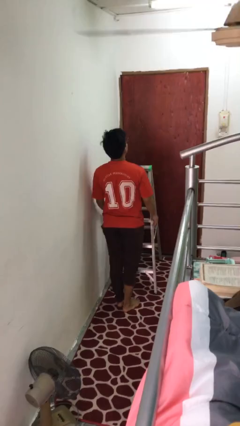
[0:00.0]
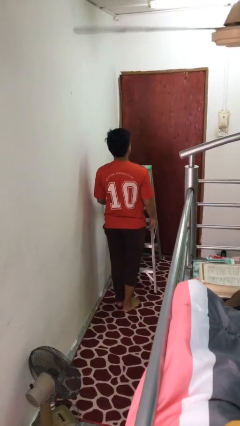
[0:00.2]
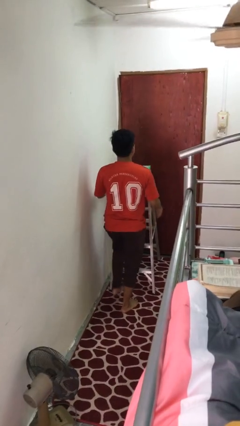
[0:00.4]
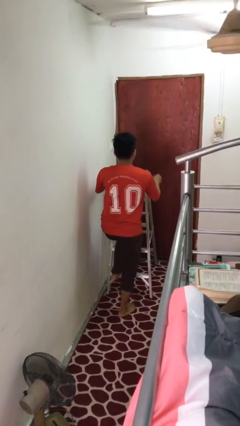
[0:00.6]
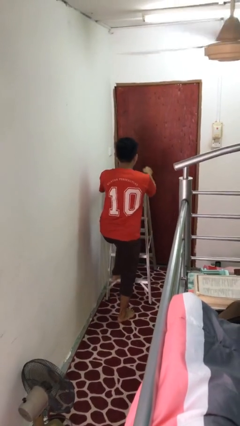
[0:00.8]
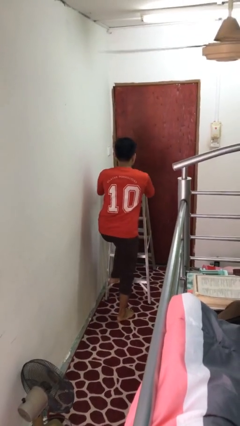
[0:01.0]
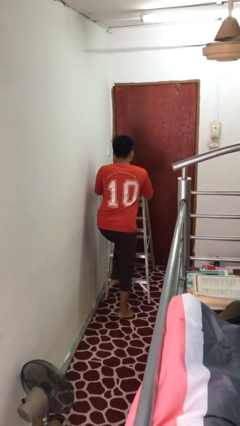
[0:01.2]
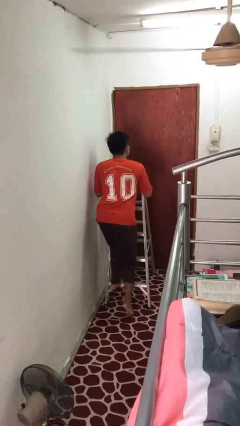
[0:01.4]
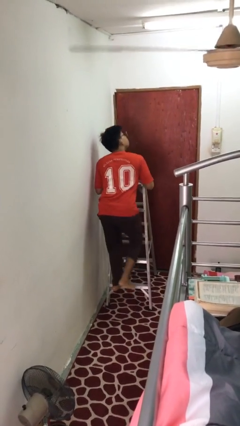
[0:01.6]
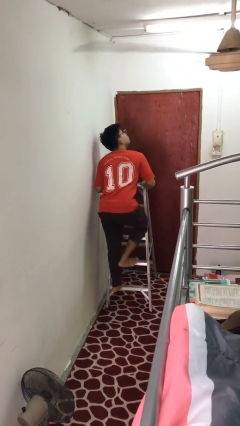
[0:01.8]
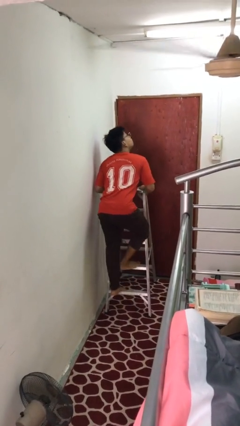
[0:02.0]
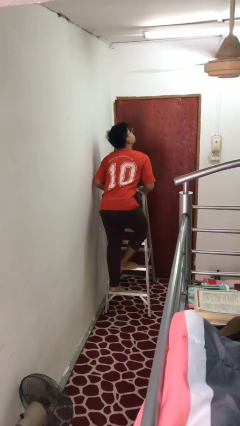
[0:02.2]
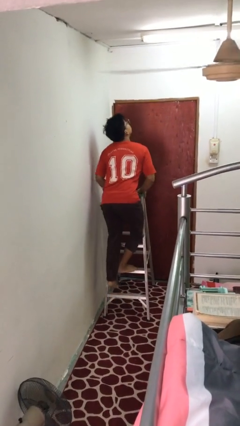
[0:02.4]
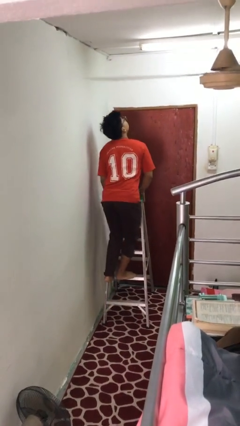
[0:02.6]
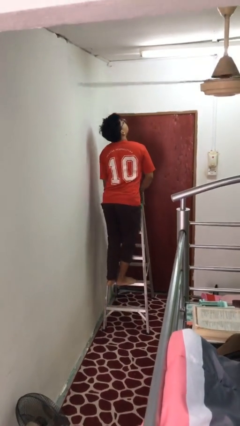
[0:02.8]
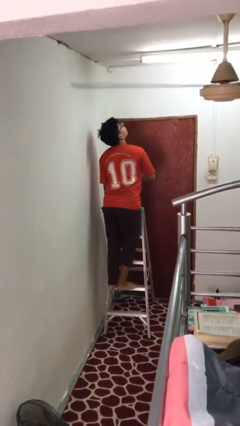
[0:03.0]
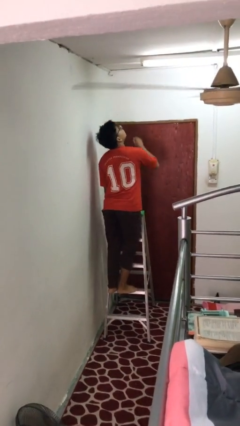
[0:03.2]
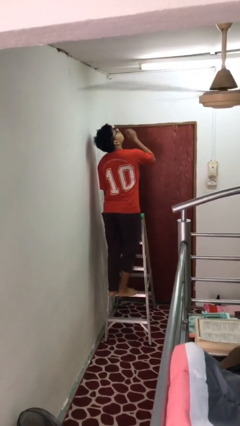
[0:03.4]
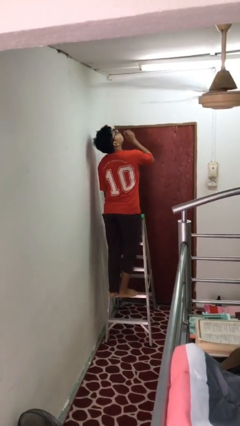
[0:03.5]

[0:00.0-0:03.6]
person climbs up ladder

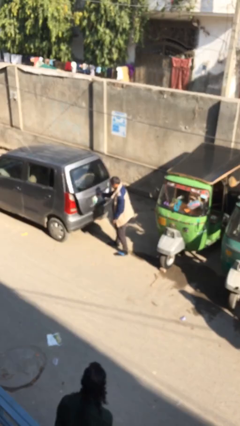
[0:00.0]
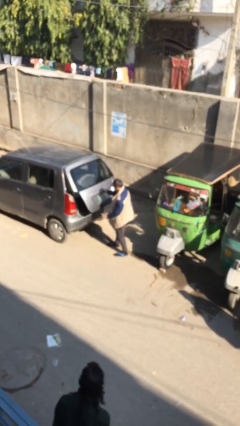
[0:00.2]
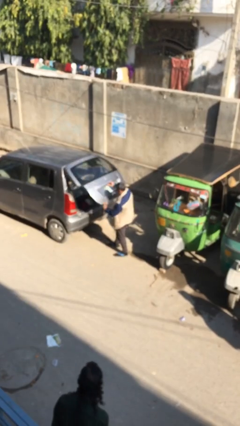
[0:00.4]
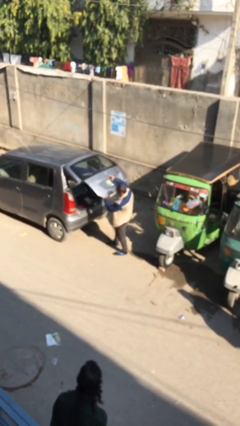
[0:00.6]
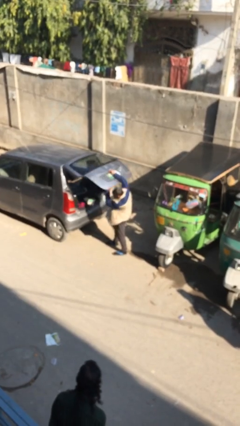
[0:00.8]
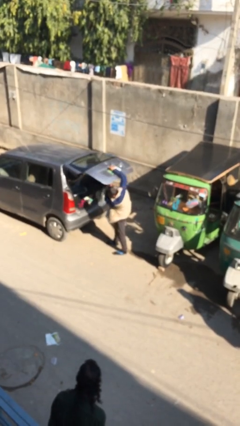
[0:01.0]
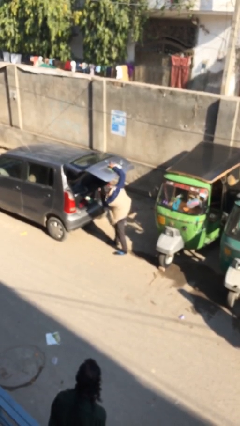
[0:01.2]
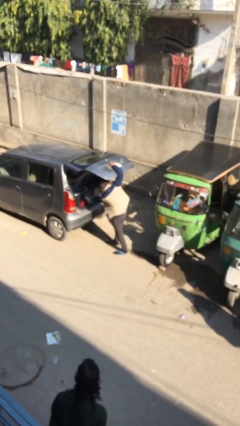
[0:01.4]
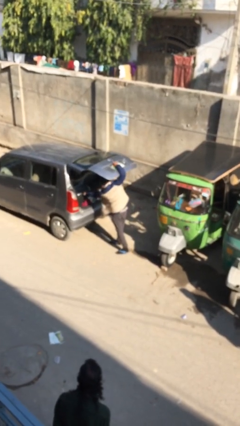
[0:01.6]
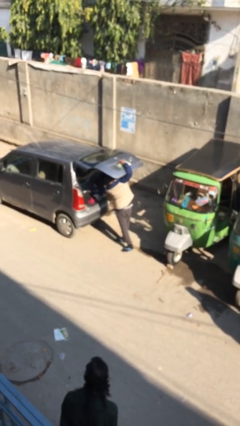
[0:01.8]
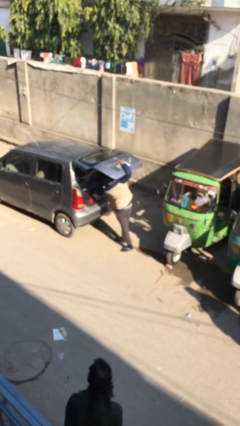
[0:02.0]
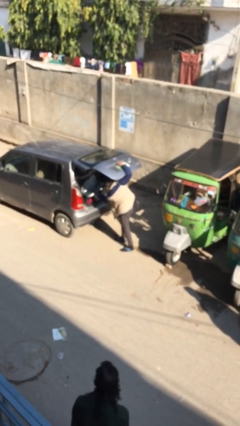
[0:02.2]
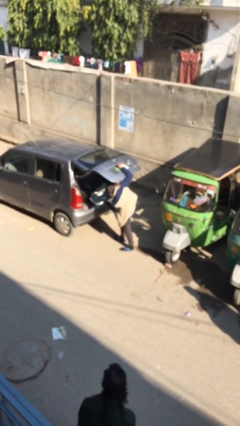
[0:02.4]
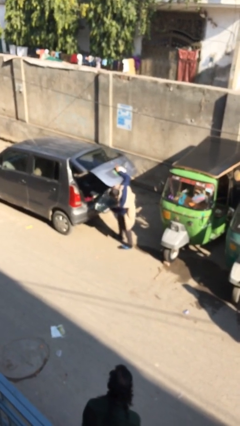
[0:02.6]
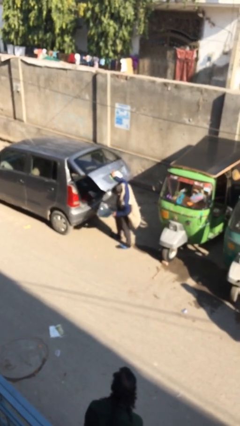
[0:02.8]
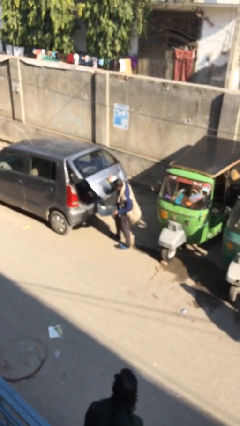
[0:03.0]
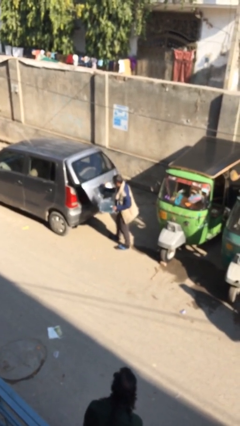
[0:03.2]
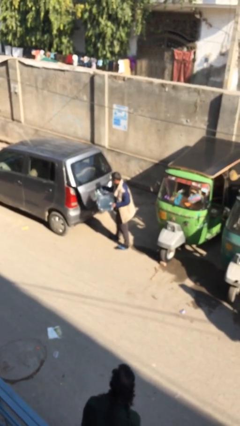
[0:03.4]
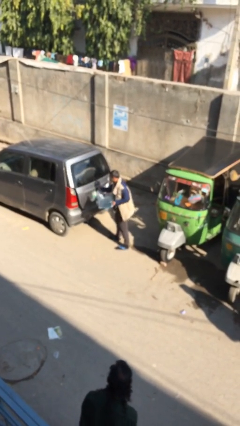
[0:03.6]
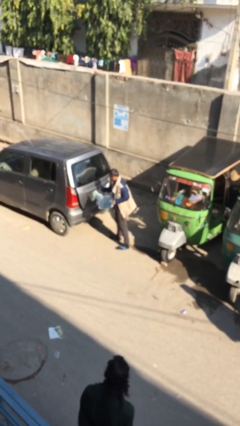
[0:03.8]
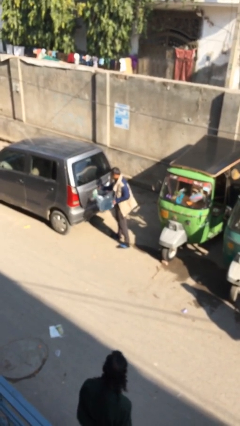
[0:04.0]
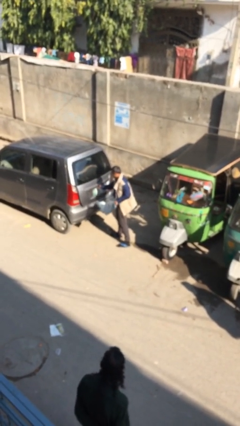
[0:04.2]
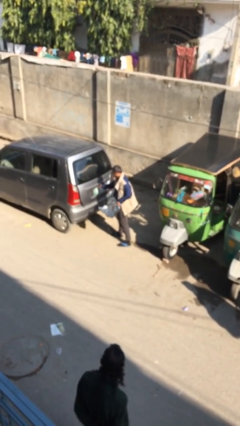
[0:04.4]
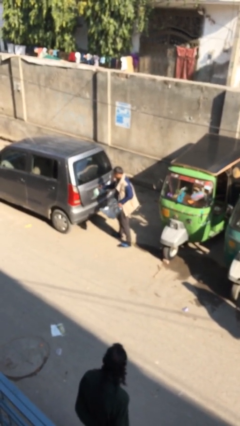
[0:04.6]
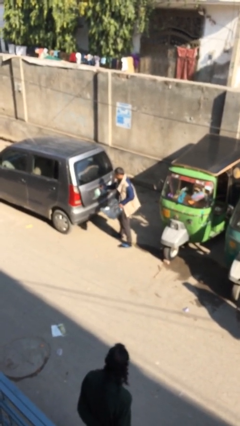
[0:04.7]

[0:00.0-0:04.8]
person unloads car

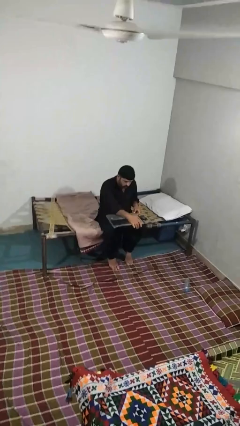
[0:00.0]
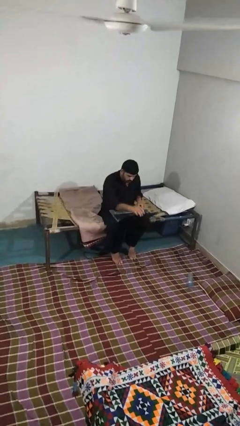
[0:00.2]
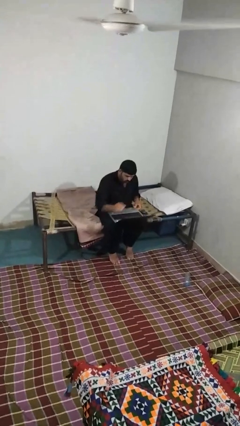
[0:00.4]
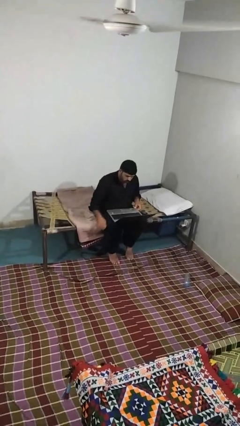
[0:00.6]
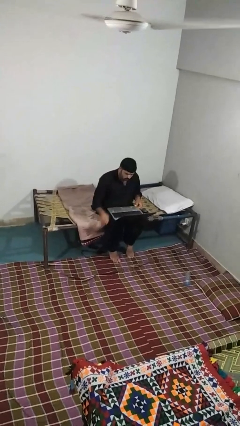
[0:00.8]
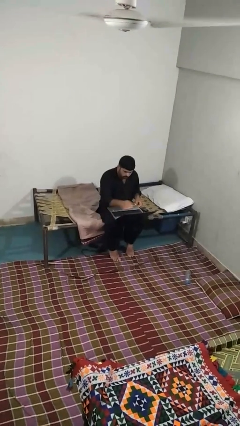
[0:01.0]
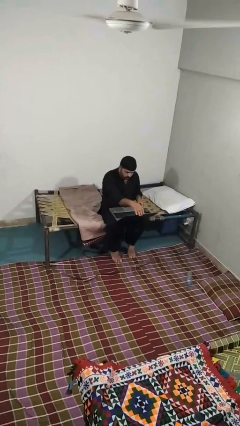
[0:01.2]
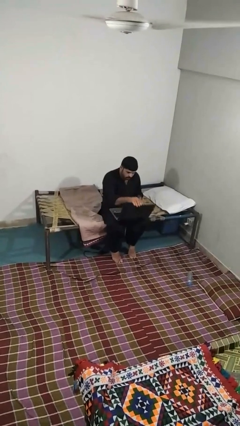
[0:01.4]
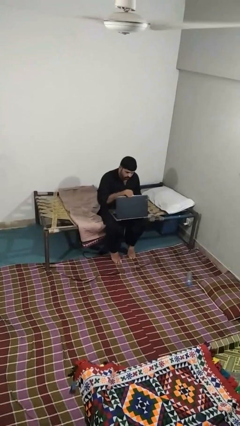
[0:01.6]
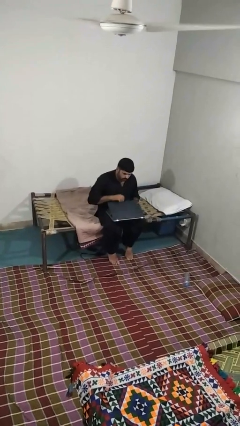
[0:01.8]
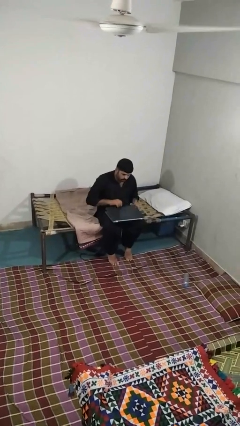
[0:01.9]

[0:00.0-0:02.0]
person closes laptop

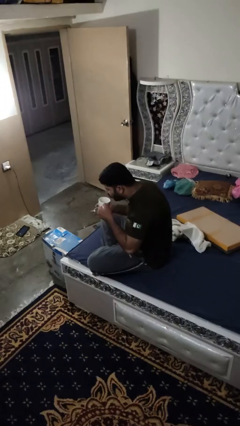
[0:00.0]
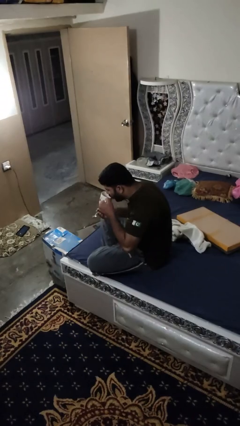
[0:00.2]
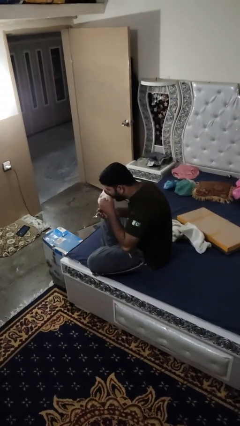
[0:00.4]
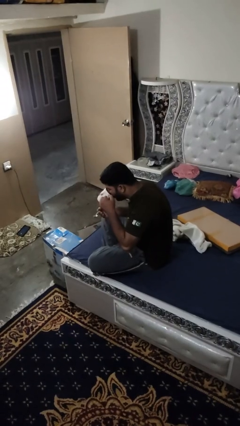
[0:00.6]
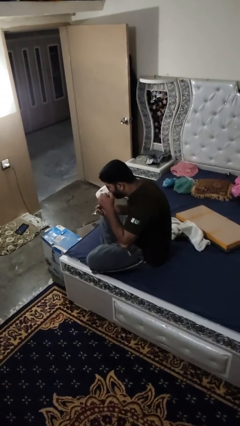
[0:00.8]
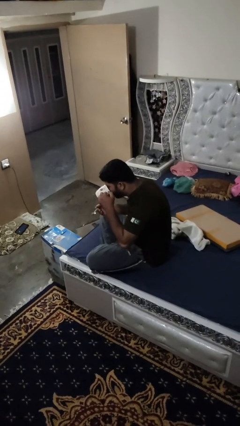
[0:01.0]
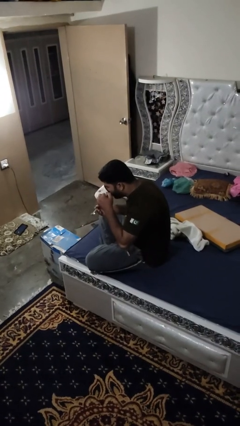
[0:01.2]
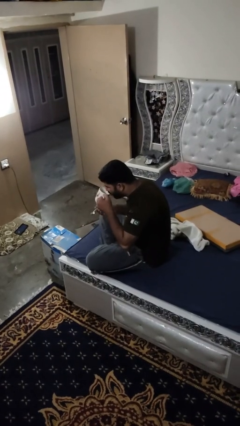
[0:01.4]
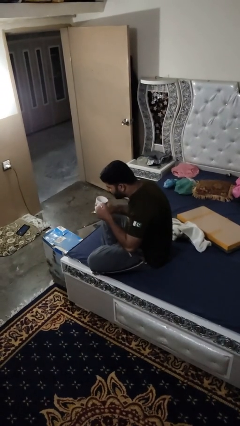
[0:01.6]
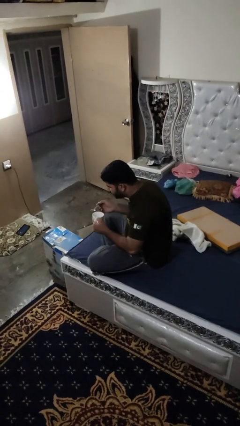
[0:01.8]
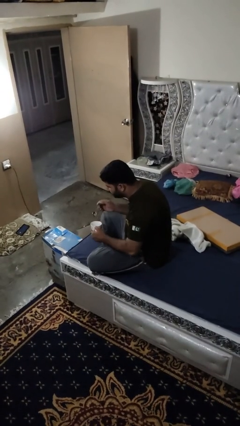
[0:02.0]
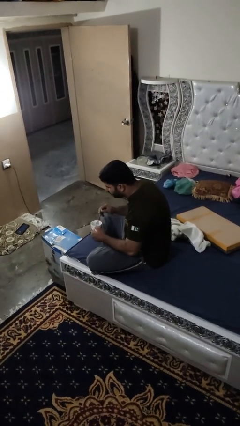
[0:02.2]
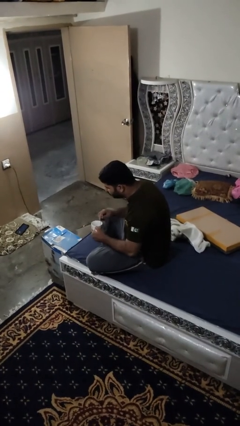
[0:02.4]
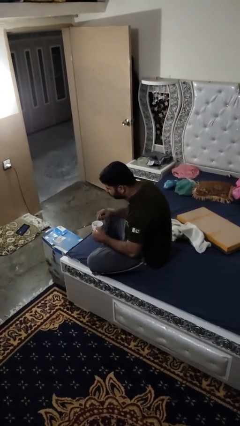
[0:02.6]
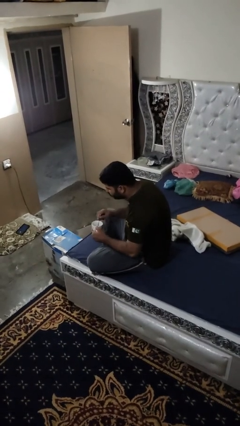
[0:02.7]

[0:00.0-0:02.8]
person drinks from mug

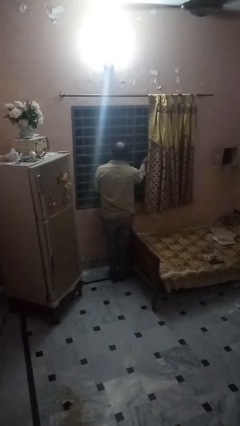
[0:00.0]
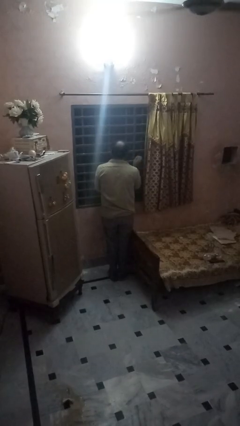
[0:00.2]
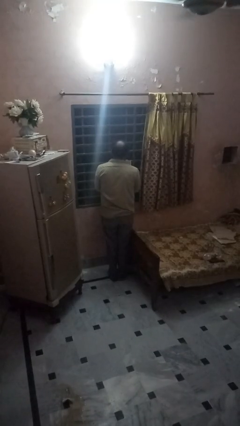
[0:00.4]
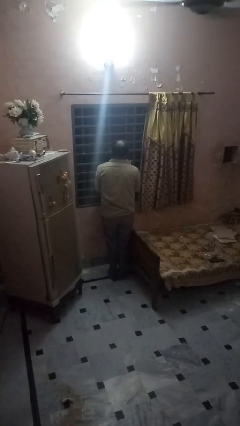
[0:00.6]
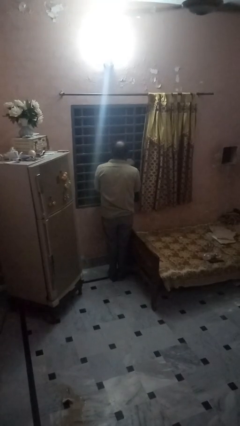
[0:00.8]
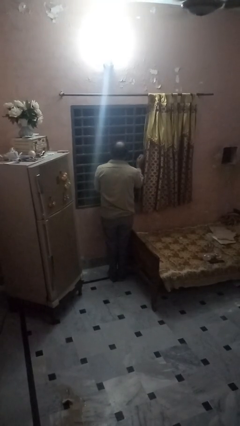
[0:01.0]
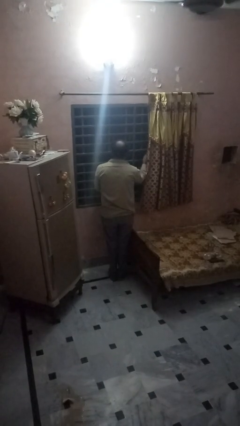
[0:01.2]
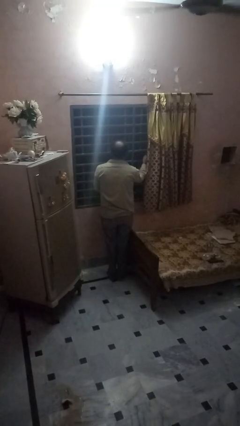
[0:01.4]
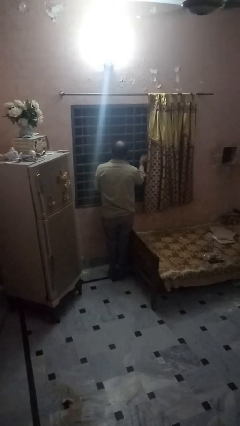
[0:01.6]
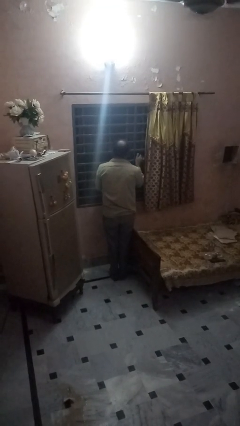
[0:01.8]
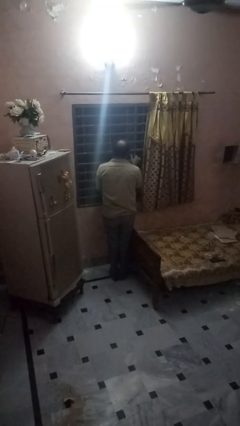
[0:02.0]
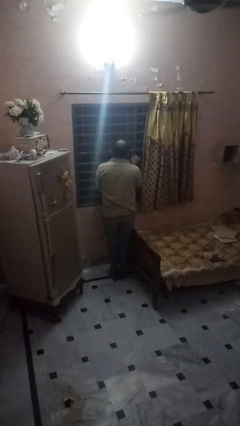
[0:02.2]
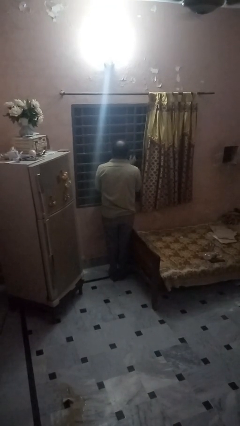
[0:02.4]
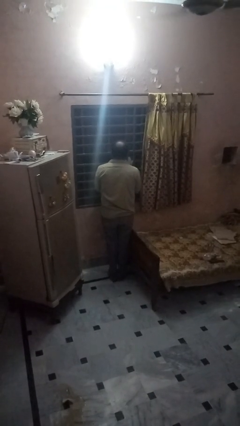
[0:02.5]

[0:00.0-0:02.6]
person closes home window

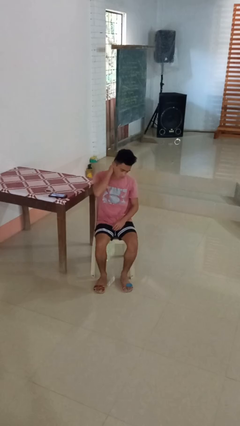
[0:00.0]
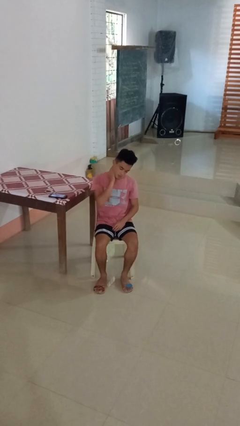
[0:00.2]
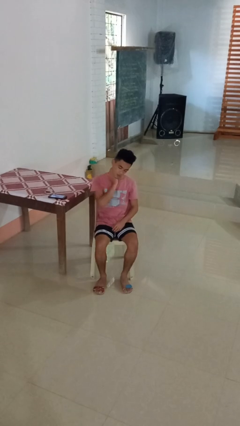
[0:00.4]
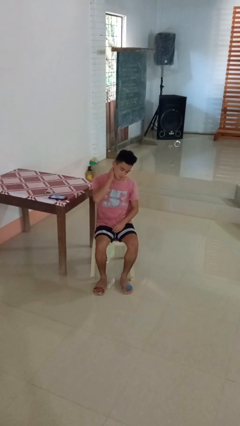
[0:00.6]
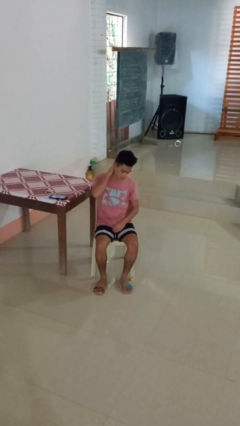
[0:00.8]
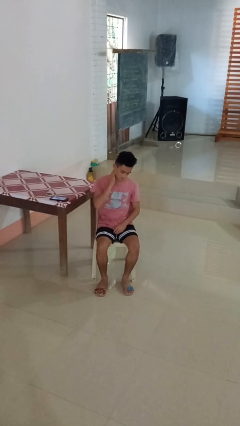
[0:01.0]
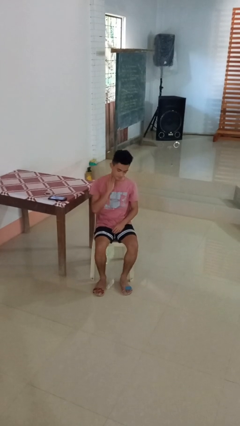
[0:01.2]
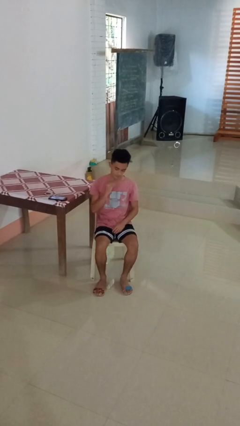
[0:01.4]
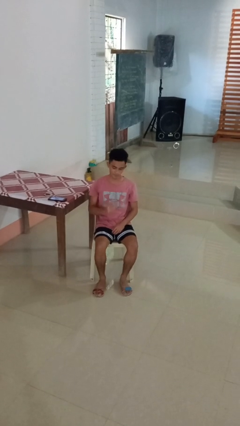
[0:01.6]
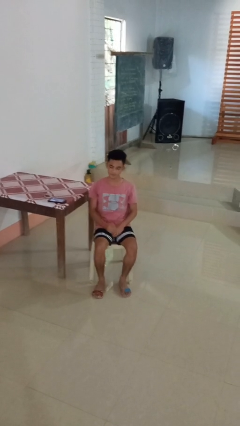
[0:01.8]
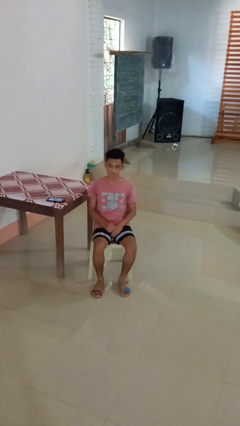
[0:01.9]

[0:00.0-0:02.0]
person rubs neck
